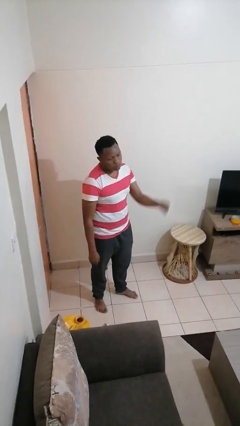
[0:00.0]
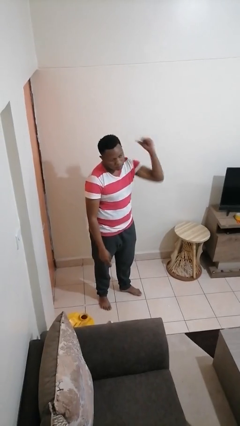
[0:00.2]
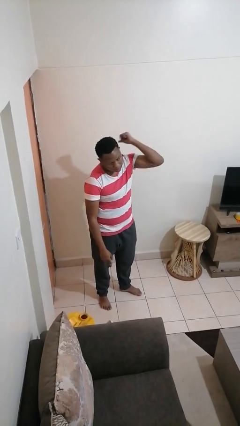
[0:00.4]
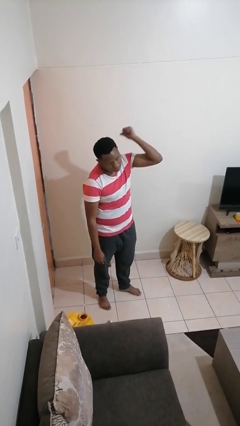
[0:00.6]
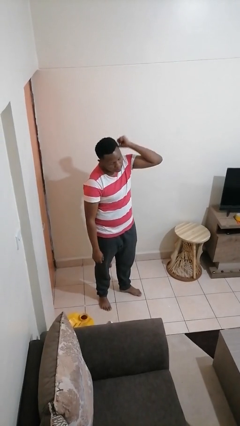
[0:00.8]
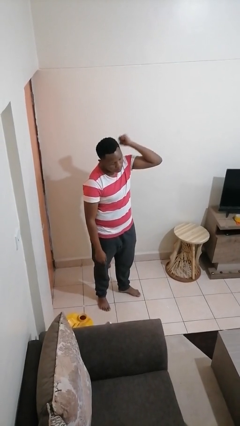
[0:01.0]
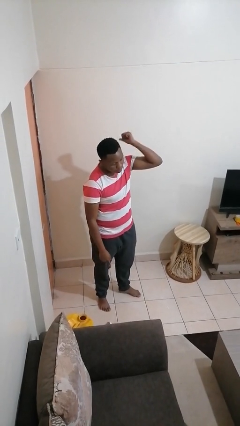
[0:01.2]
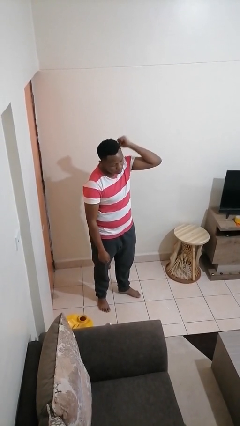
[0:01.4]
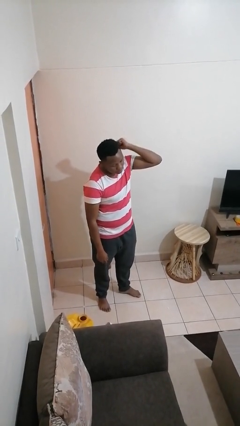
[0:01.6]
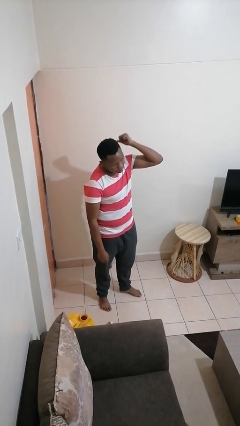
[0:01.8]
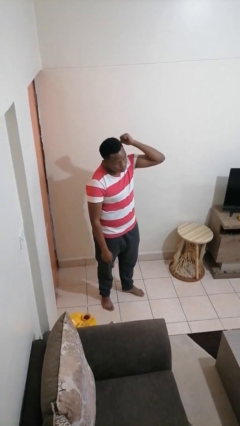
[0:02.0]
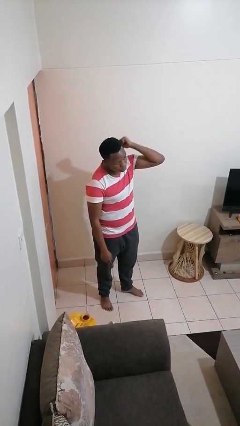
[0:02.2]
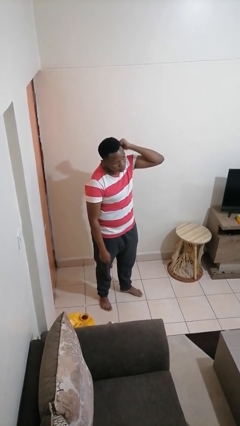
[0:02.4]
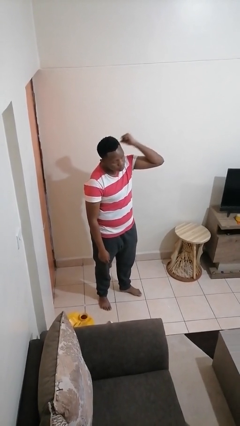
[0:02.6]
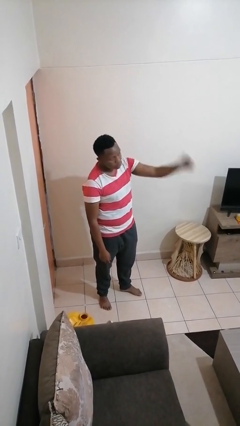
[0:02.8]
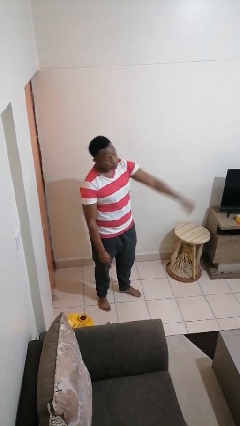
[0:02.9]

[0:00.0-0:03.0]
person gestures behind me

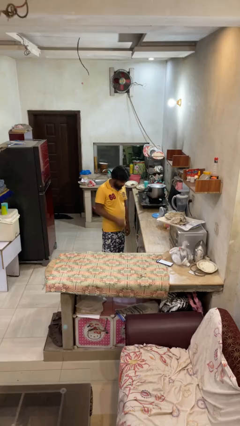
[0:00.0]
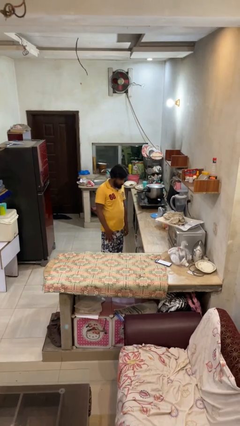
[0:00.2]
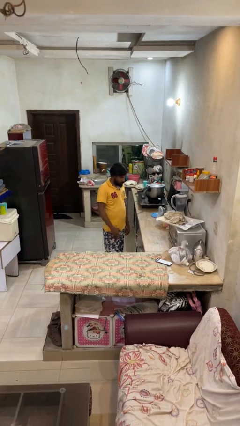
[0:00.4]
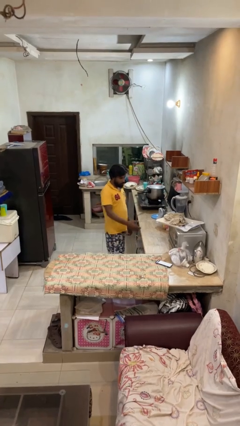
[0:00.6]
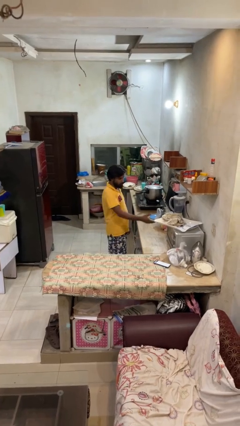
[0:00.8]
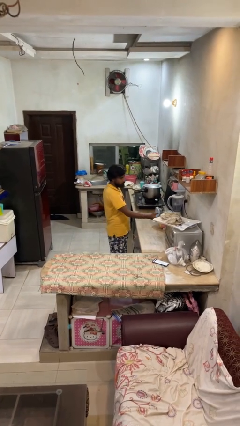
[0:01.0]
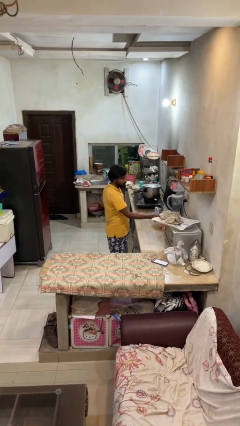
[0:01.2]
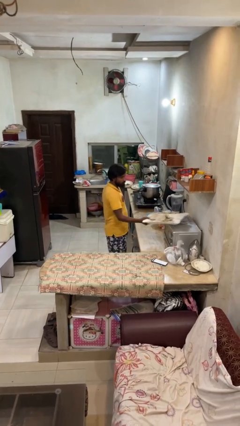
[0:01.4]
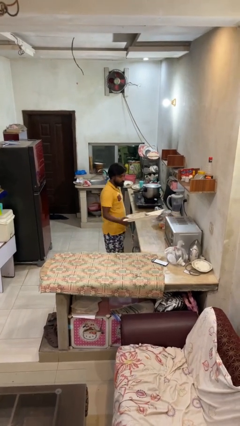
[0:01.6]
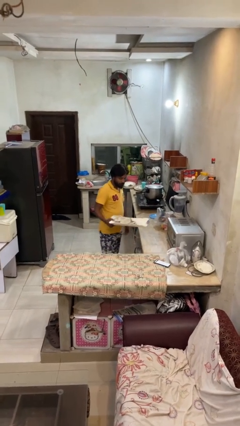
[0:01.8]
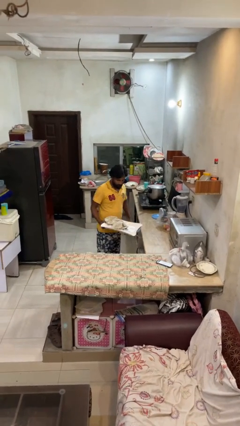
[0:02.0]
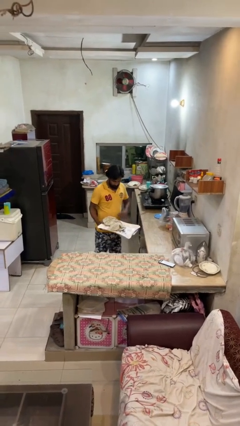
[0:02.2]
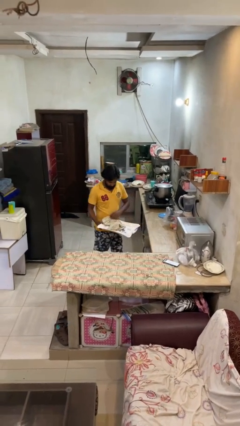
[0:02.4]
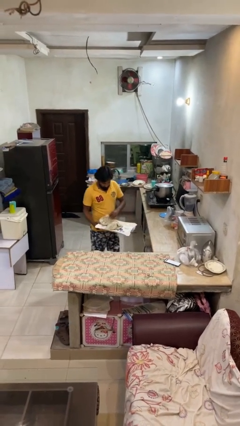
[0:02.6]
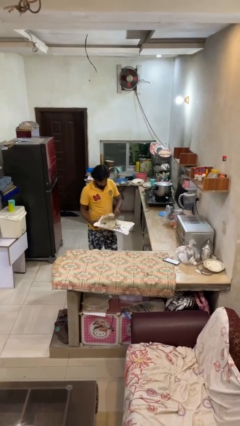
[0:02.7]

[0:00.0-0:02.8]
person picks up object from countertop

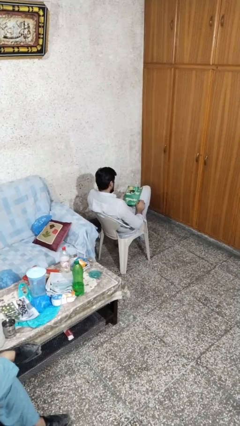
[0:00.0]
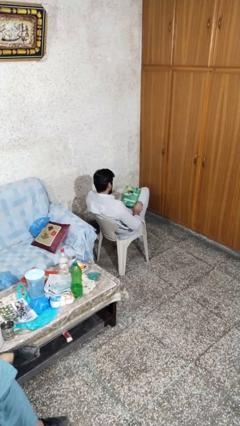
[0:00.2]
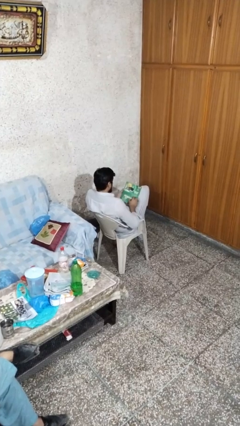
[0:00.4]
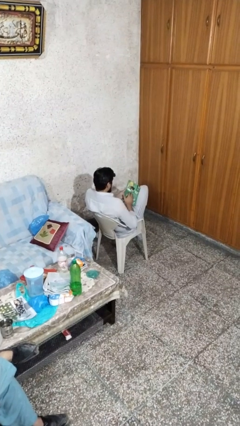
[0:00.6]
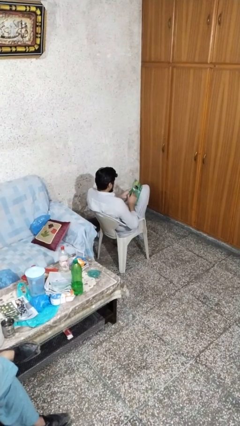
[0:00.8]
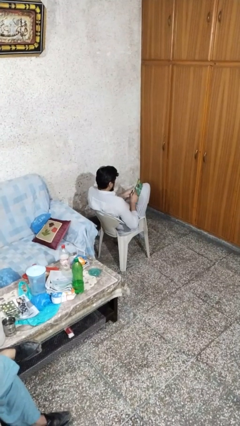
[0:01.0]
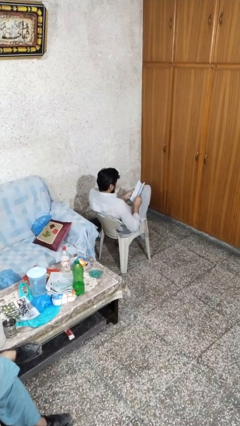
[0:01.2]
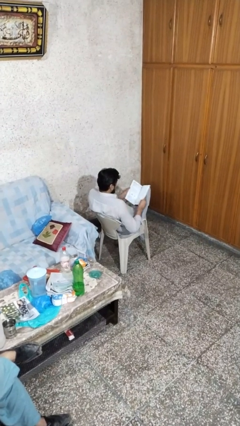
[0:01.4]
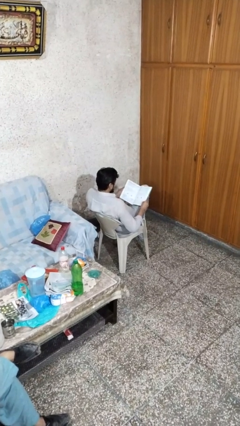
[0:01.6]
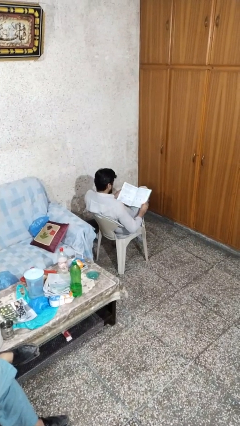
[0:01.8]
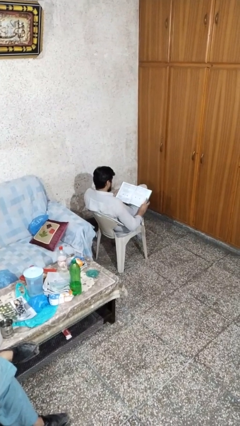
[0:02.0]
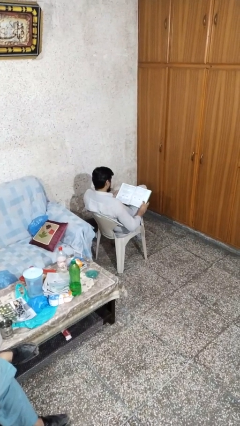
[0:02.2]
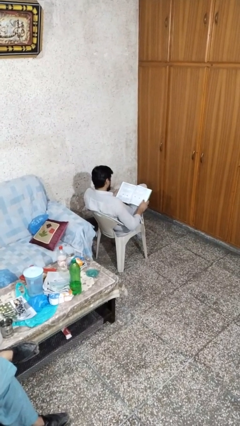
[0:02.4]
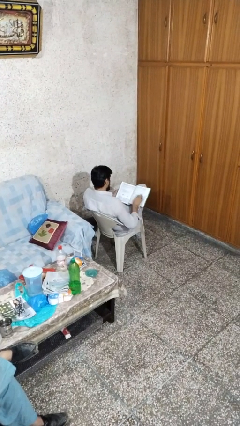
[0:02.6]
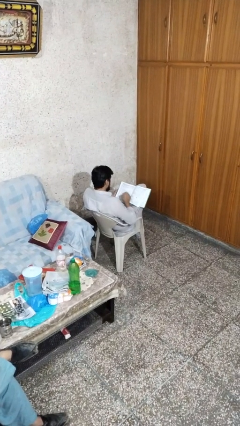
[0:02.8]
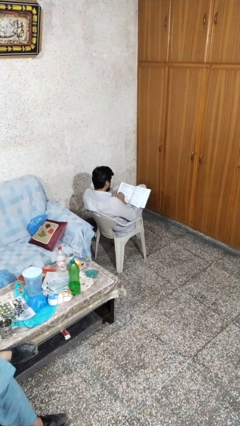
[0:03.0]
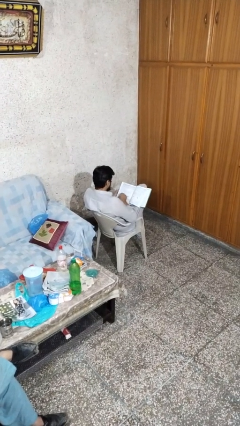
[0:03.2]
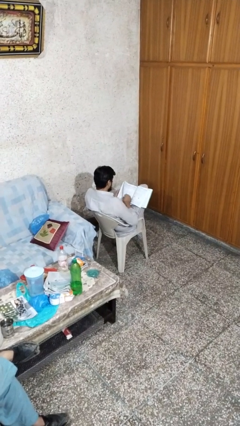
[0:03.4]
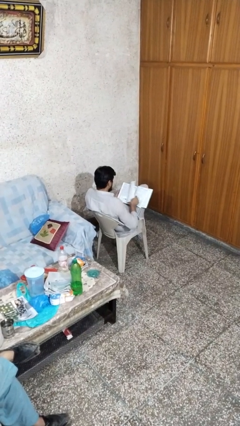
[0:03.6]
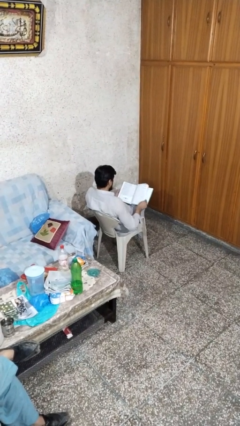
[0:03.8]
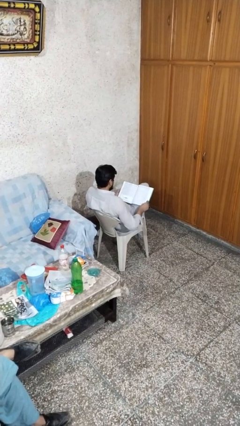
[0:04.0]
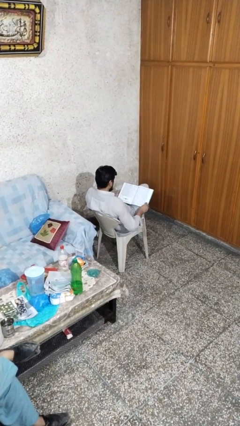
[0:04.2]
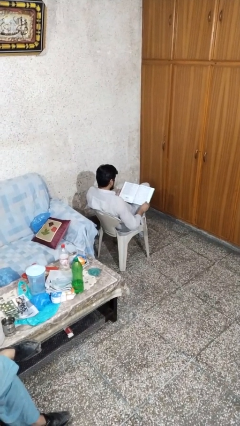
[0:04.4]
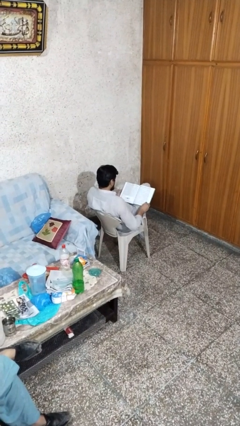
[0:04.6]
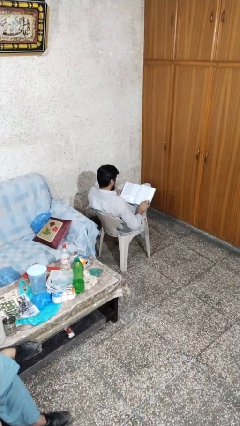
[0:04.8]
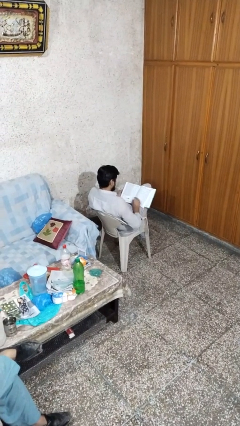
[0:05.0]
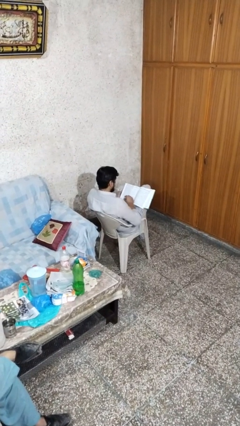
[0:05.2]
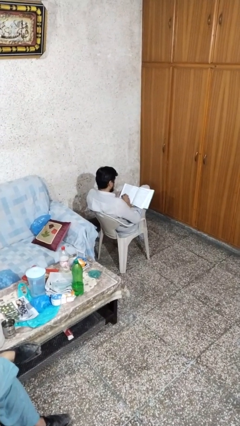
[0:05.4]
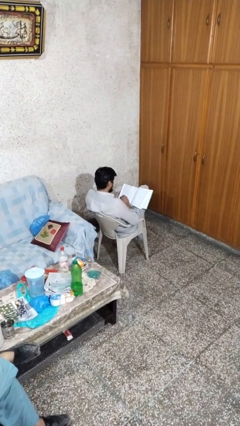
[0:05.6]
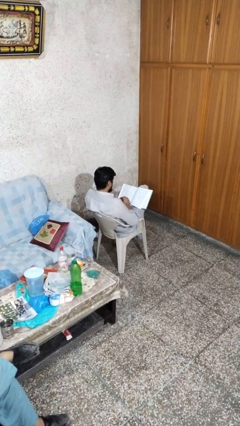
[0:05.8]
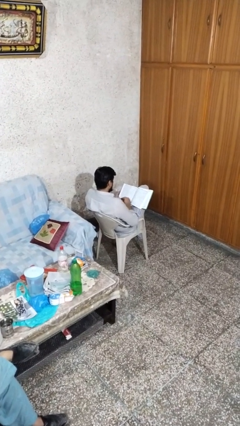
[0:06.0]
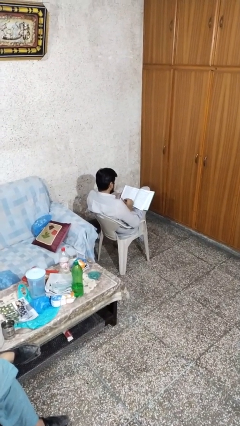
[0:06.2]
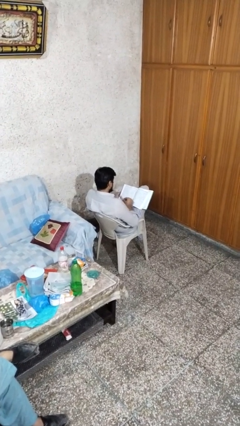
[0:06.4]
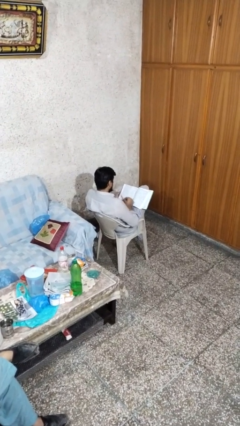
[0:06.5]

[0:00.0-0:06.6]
person reads book

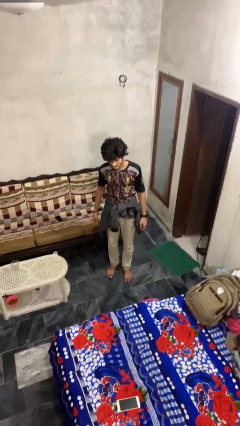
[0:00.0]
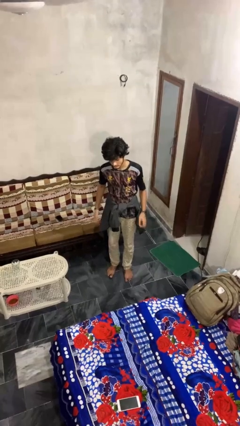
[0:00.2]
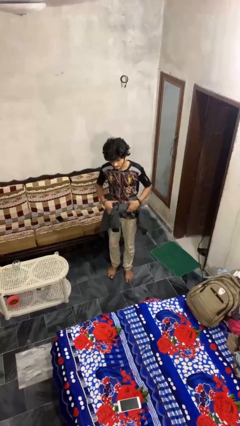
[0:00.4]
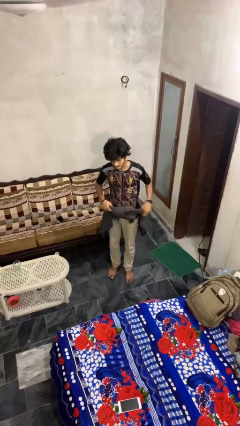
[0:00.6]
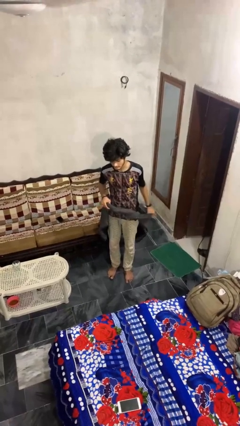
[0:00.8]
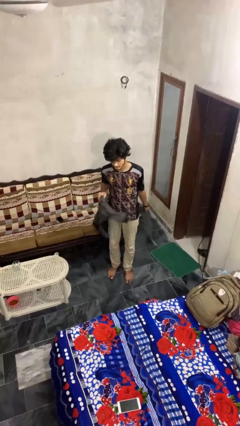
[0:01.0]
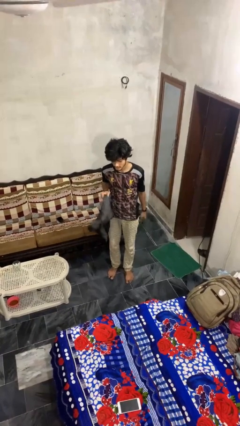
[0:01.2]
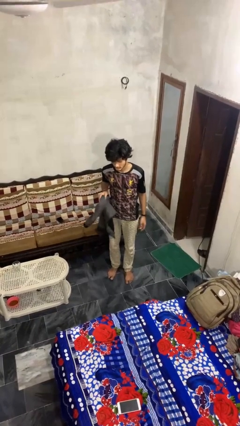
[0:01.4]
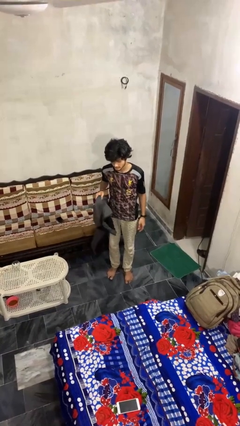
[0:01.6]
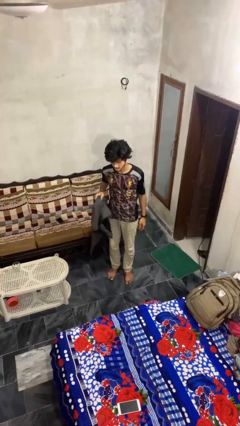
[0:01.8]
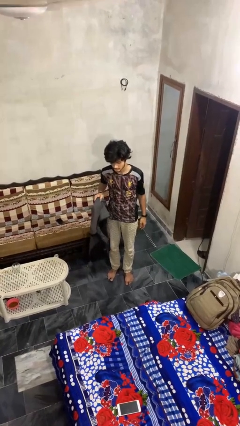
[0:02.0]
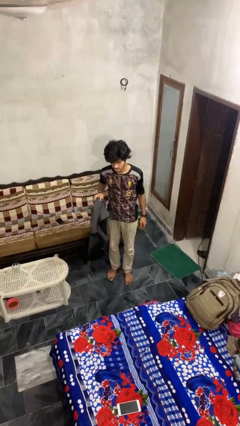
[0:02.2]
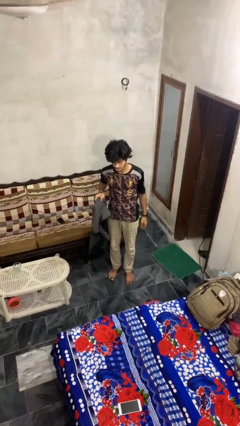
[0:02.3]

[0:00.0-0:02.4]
person unties jacket around waist

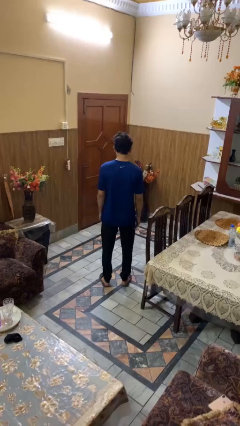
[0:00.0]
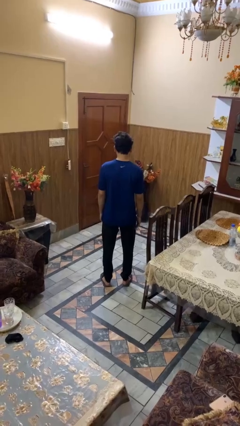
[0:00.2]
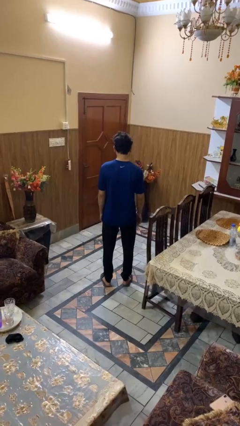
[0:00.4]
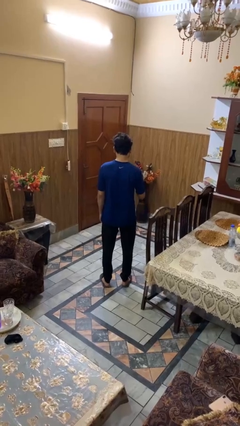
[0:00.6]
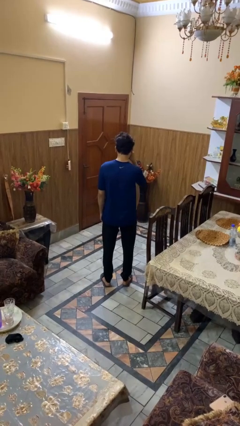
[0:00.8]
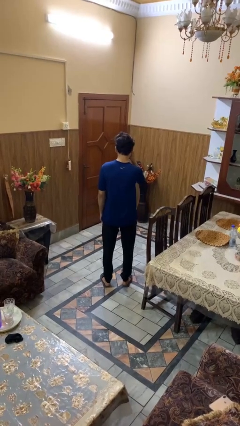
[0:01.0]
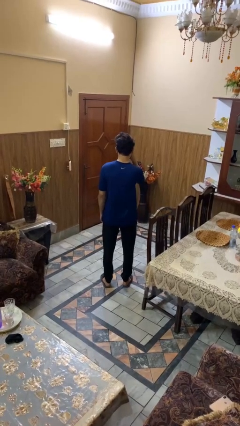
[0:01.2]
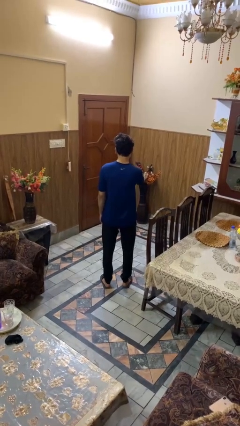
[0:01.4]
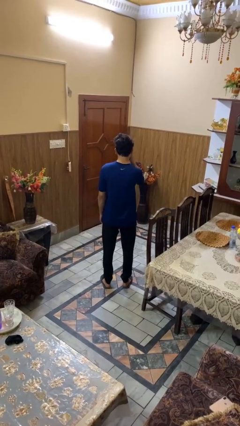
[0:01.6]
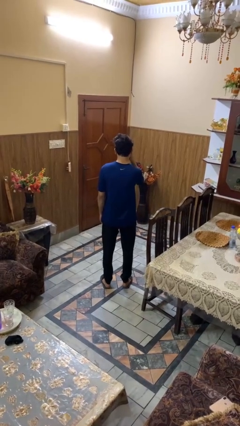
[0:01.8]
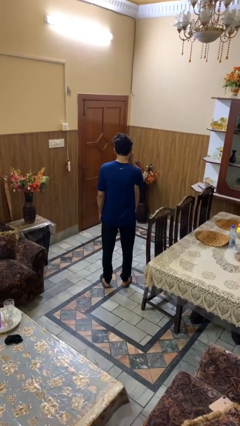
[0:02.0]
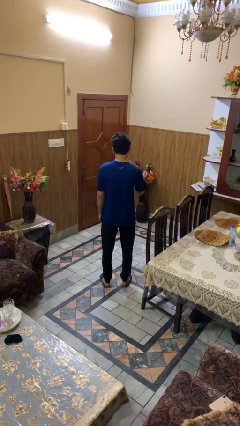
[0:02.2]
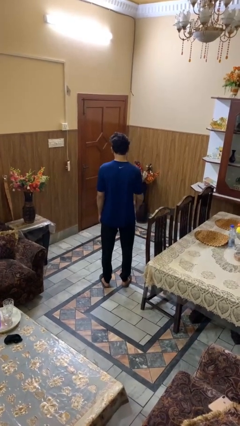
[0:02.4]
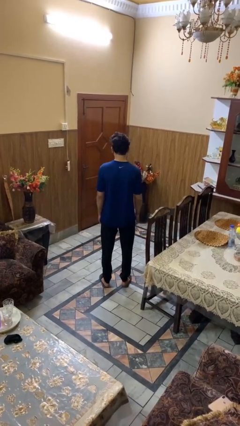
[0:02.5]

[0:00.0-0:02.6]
person rubs eyes
